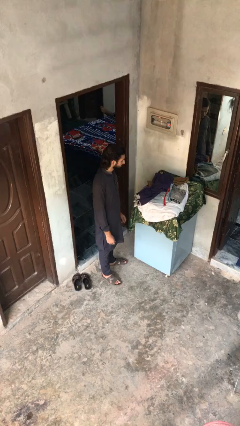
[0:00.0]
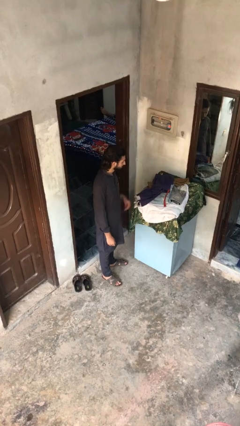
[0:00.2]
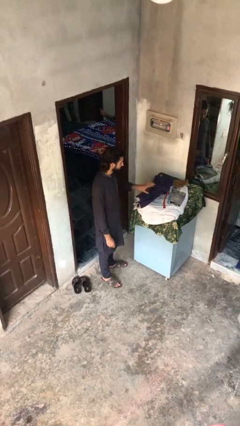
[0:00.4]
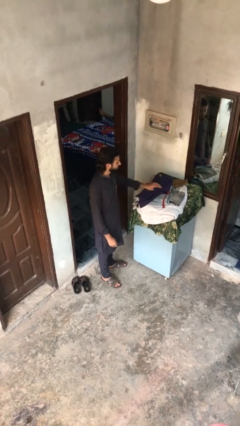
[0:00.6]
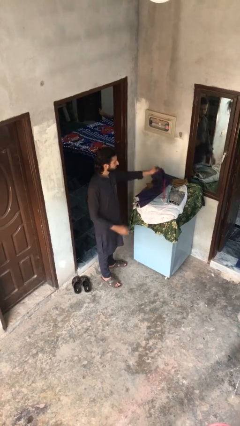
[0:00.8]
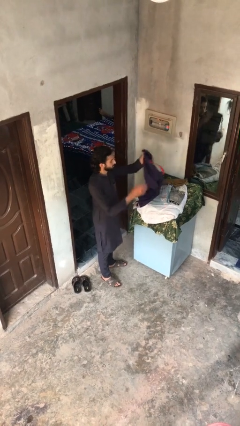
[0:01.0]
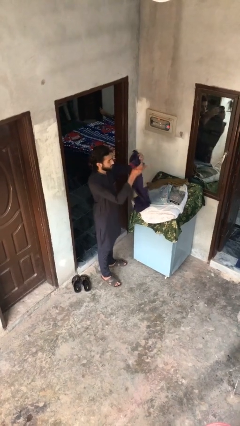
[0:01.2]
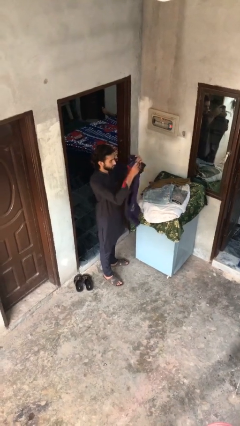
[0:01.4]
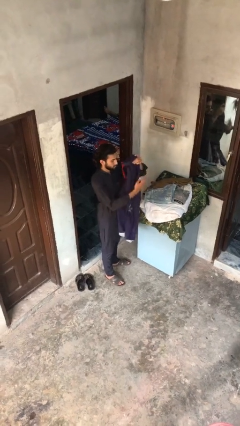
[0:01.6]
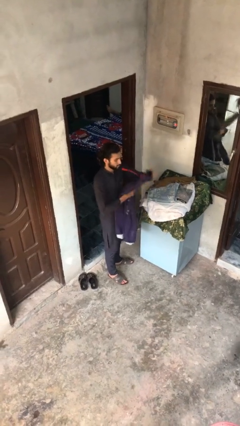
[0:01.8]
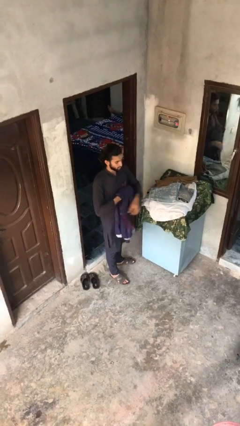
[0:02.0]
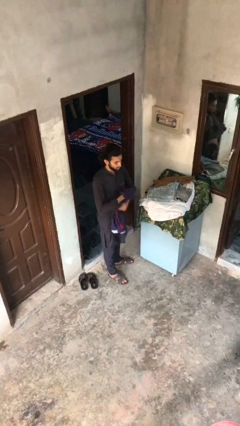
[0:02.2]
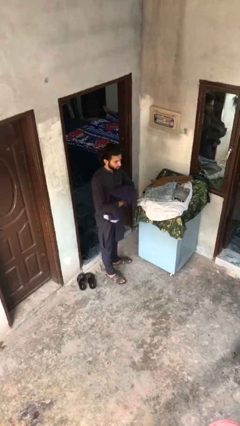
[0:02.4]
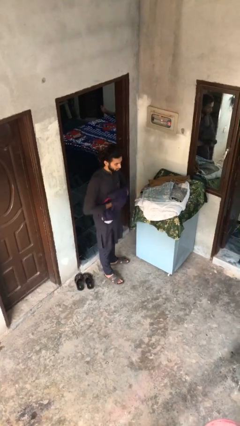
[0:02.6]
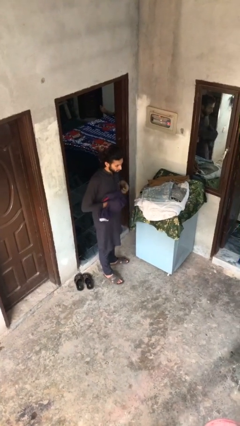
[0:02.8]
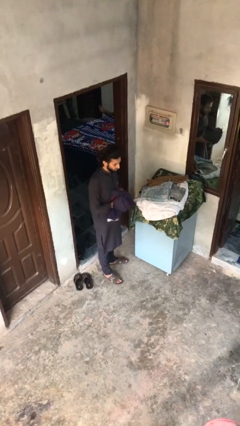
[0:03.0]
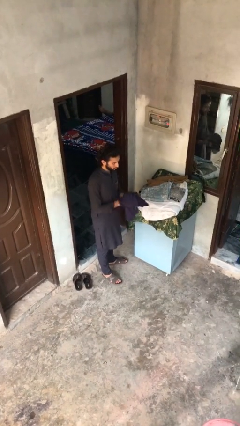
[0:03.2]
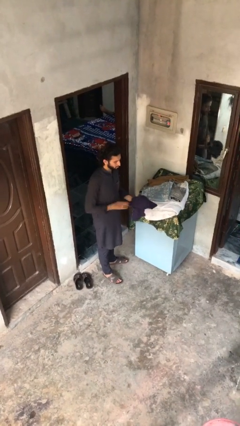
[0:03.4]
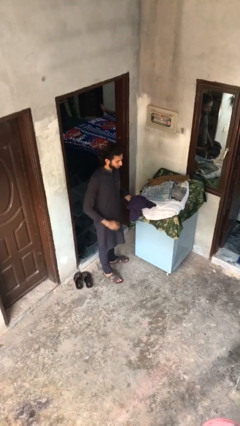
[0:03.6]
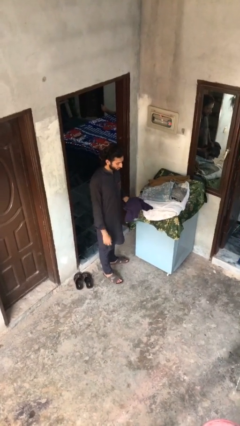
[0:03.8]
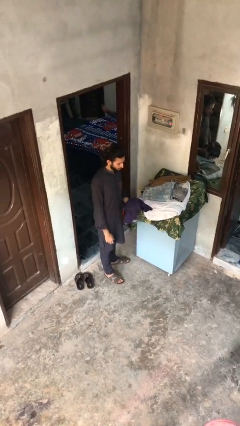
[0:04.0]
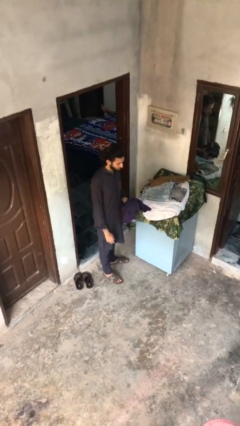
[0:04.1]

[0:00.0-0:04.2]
person folds pants

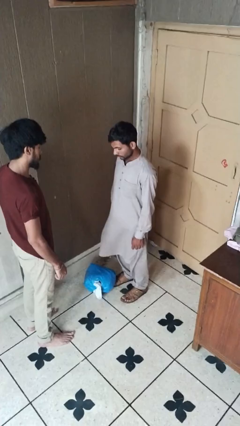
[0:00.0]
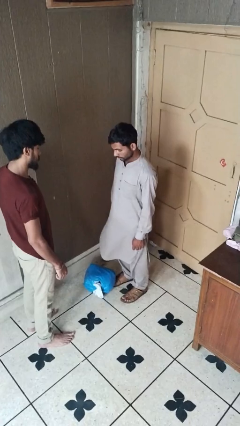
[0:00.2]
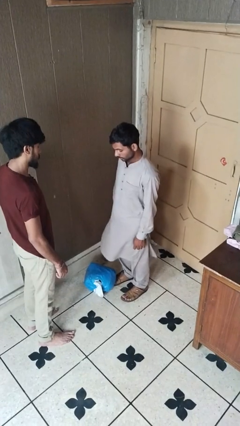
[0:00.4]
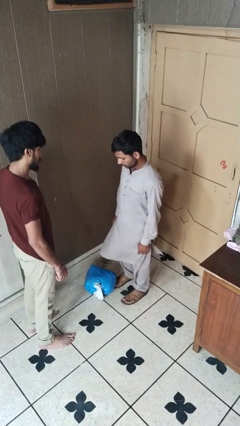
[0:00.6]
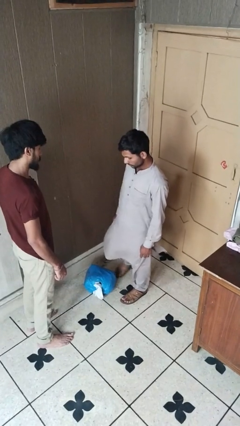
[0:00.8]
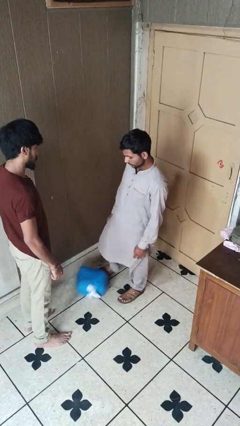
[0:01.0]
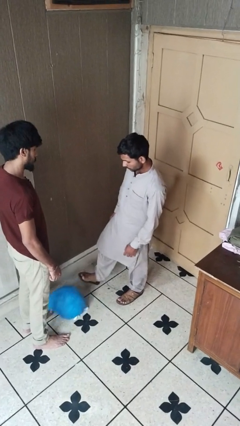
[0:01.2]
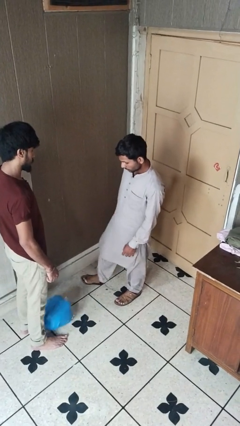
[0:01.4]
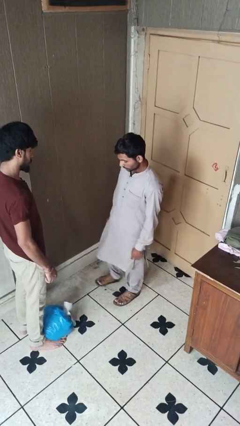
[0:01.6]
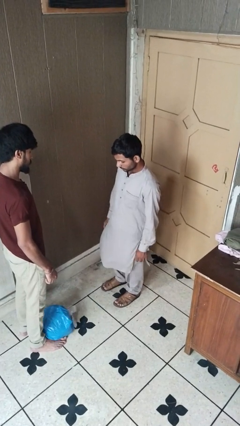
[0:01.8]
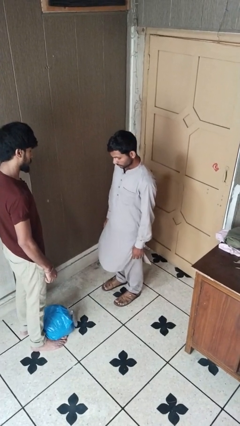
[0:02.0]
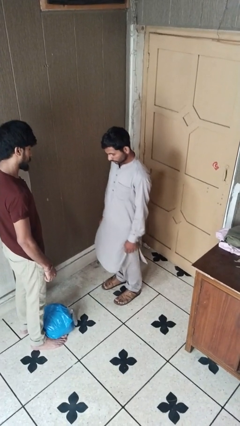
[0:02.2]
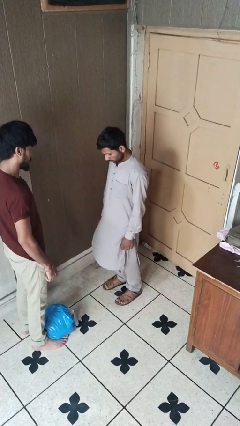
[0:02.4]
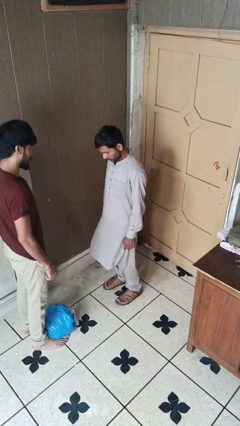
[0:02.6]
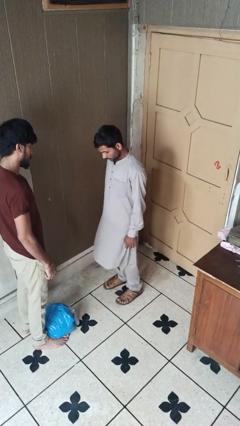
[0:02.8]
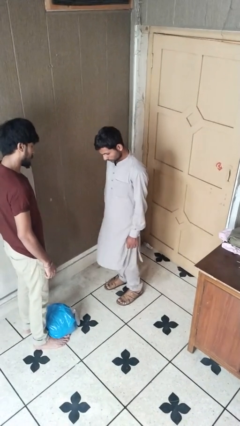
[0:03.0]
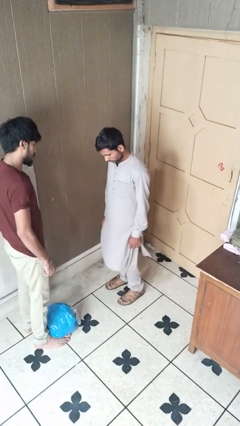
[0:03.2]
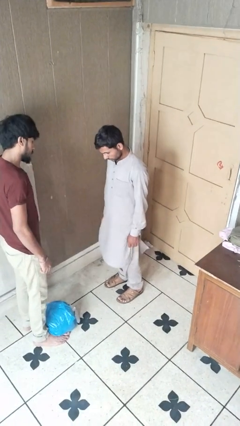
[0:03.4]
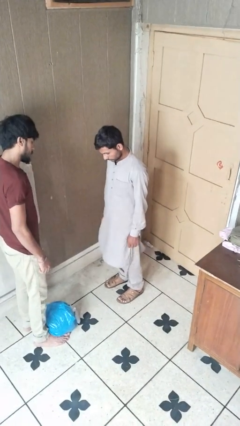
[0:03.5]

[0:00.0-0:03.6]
person kicks object to person

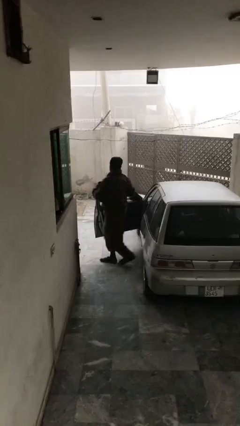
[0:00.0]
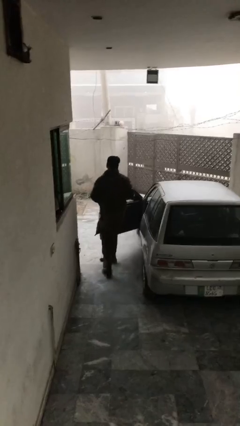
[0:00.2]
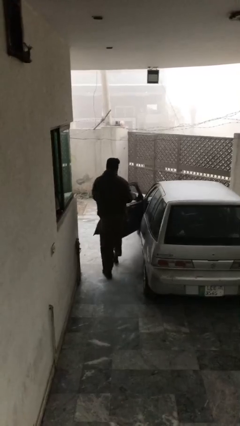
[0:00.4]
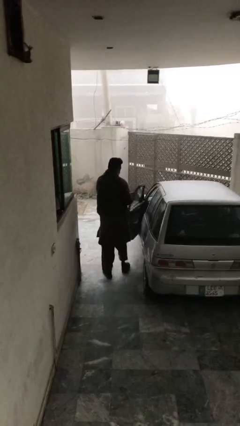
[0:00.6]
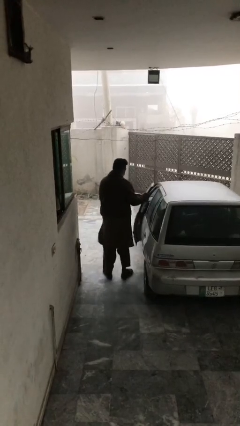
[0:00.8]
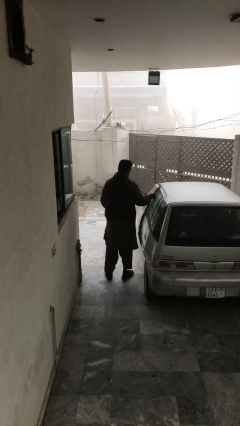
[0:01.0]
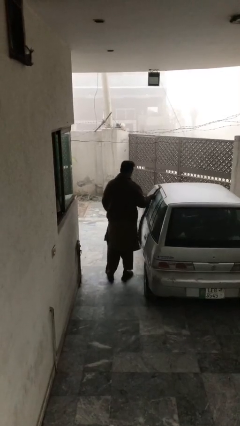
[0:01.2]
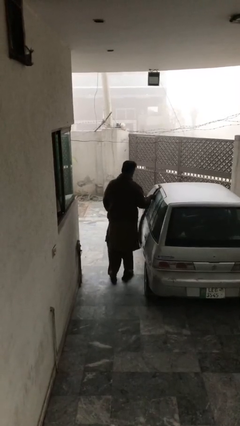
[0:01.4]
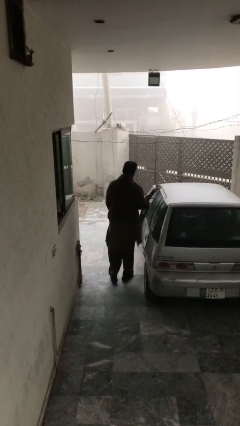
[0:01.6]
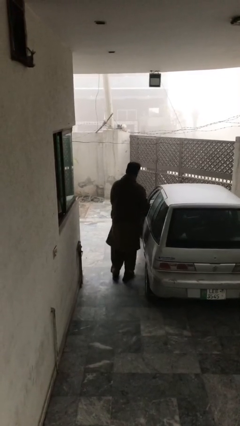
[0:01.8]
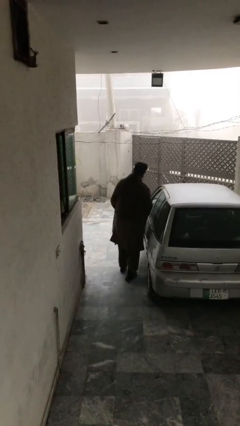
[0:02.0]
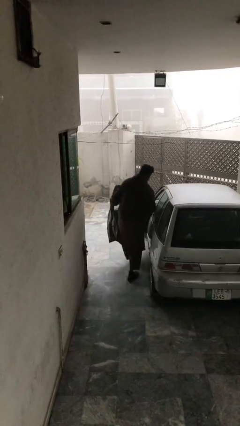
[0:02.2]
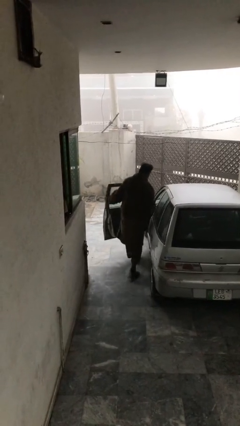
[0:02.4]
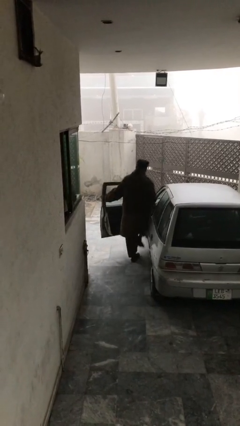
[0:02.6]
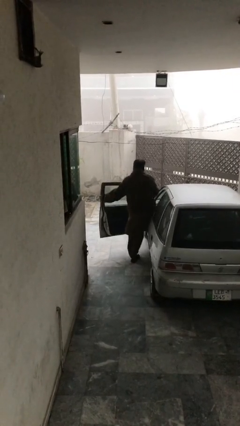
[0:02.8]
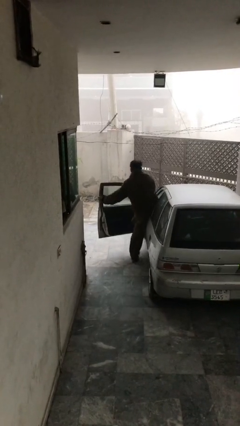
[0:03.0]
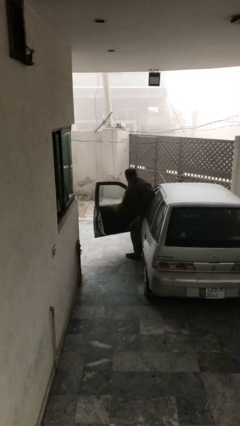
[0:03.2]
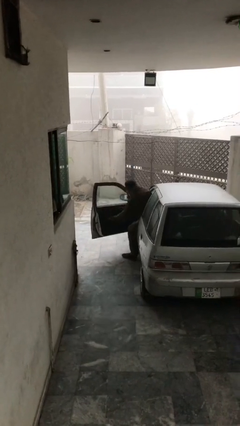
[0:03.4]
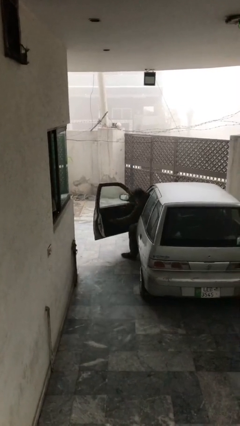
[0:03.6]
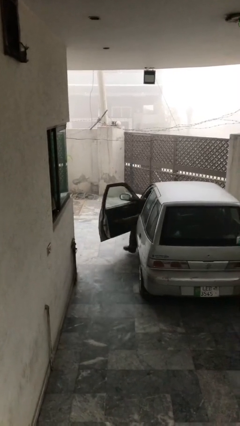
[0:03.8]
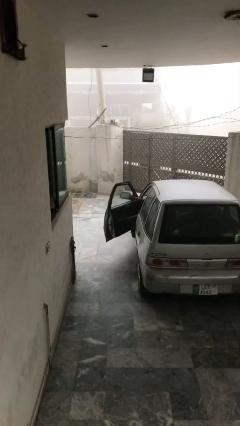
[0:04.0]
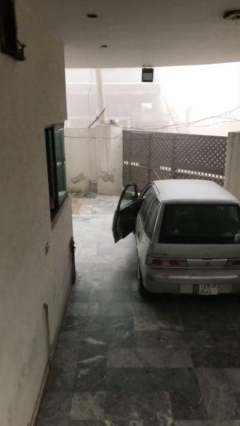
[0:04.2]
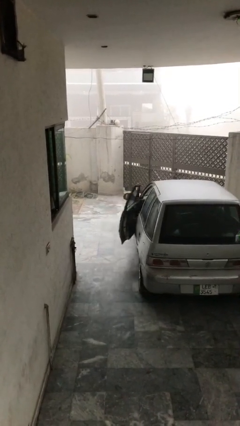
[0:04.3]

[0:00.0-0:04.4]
car picks up person

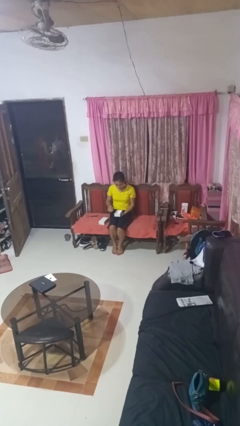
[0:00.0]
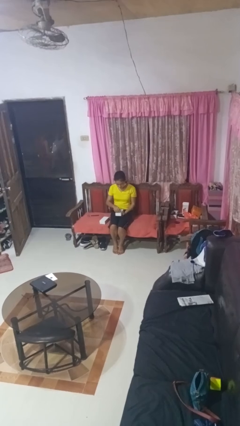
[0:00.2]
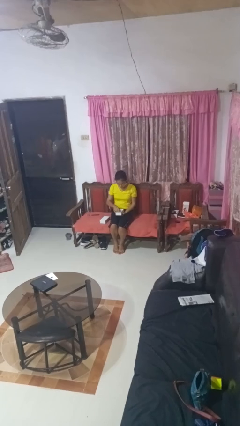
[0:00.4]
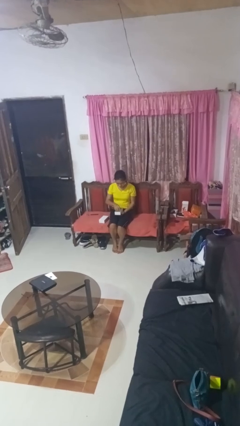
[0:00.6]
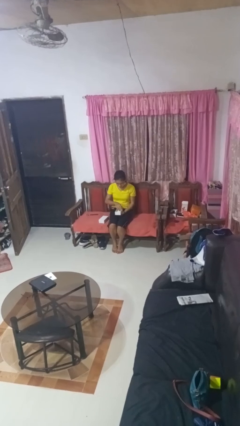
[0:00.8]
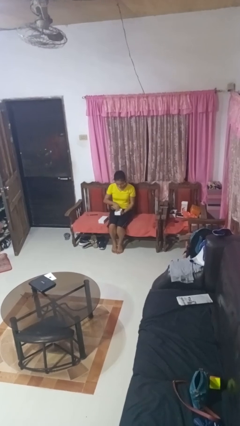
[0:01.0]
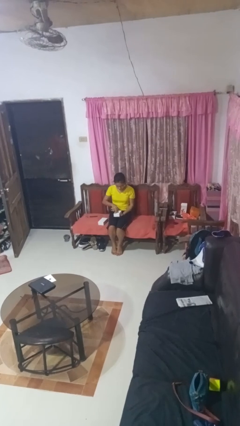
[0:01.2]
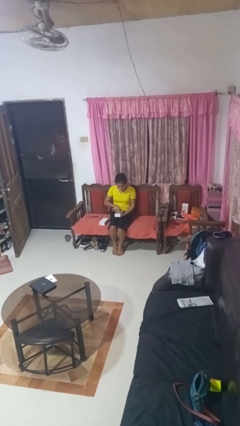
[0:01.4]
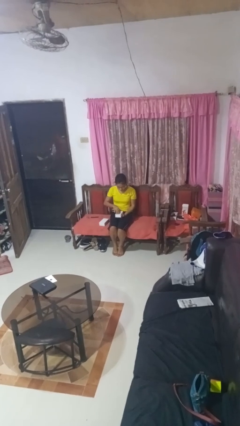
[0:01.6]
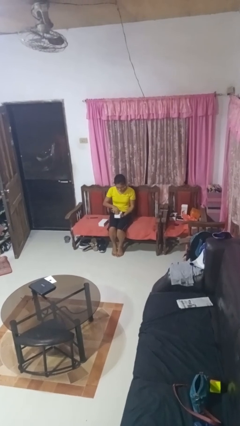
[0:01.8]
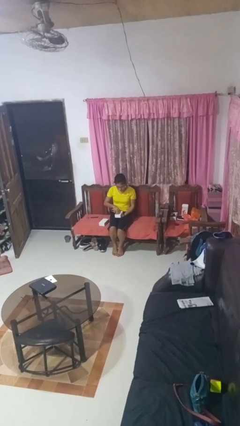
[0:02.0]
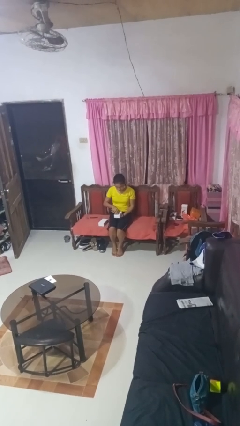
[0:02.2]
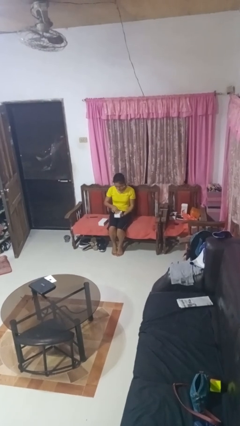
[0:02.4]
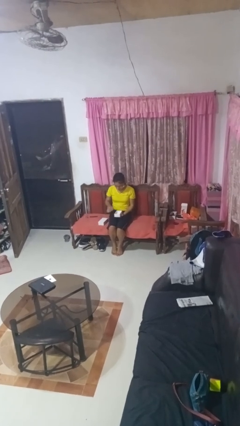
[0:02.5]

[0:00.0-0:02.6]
person searches jewelry box

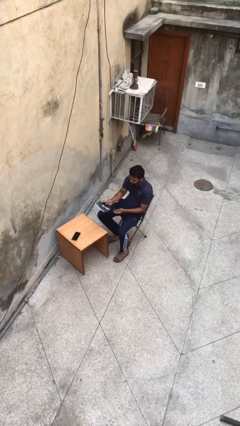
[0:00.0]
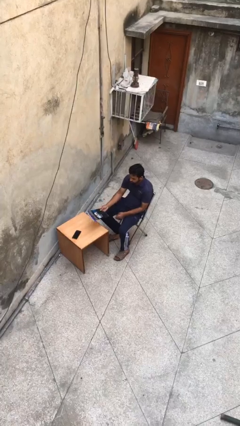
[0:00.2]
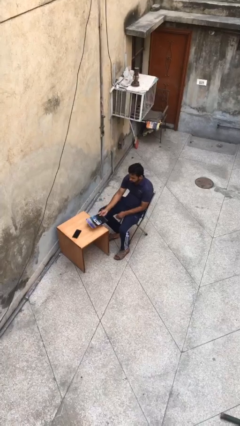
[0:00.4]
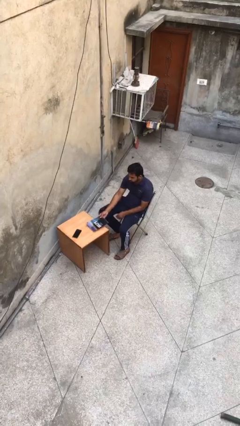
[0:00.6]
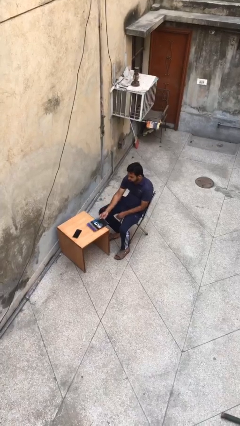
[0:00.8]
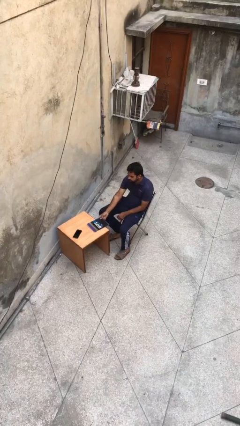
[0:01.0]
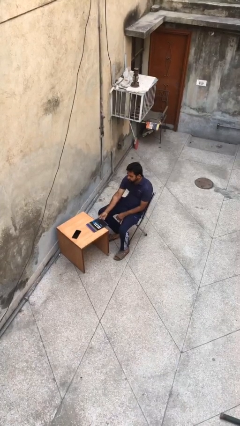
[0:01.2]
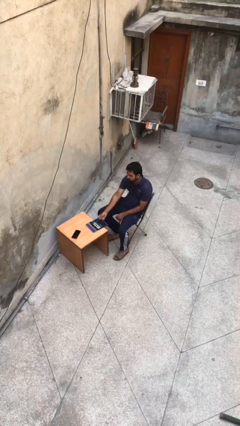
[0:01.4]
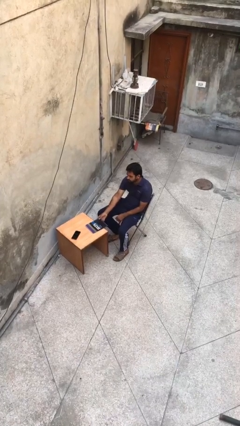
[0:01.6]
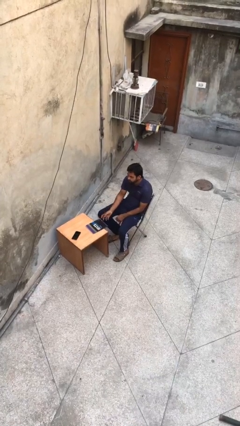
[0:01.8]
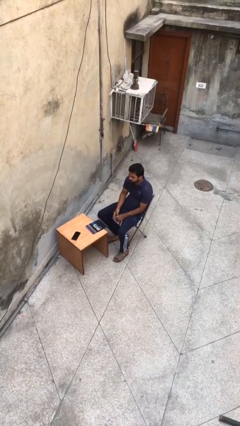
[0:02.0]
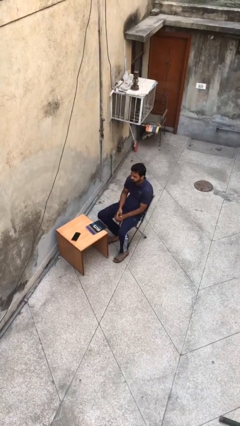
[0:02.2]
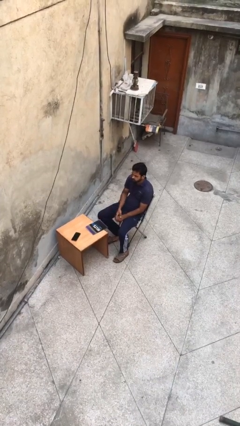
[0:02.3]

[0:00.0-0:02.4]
person puts down object on table

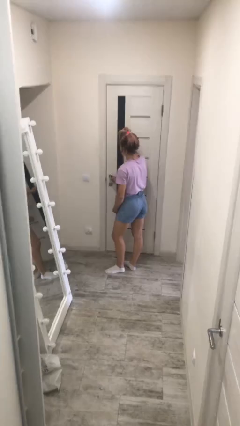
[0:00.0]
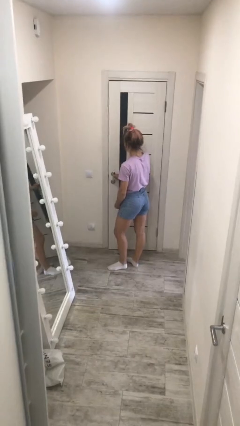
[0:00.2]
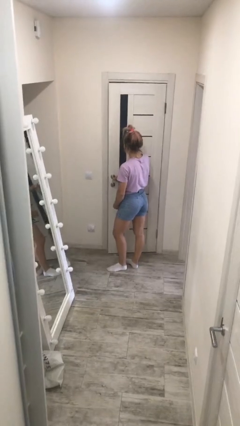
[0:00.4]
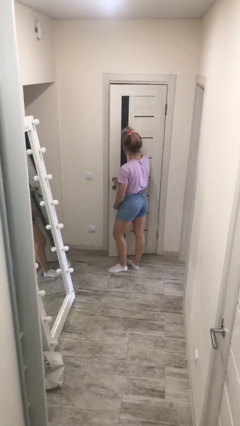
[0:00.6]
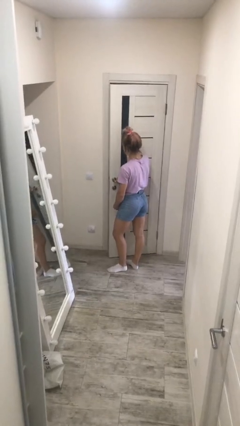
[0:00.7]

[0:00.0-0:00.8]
person opens facility door
